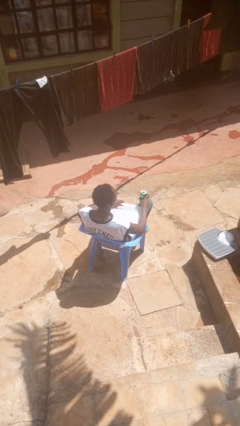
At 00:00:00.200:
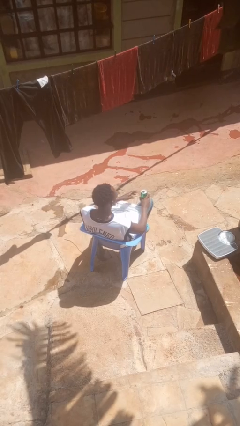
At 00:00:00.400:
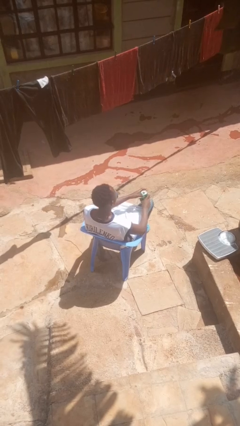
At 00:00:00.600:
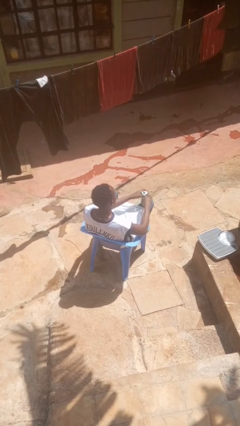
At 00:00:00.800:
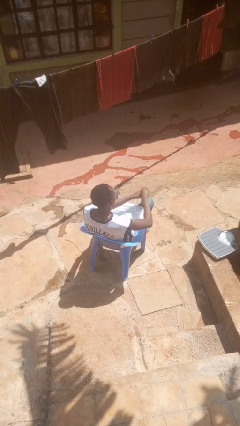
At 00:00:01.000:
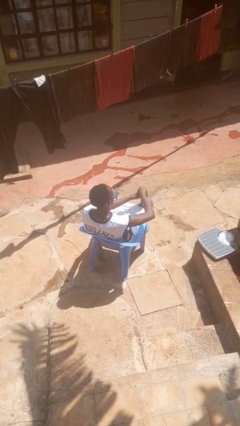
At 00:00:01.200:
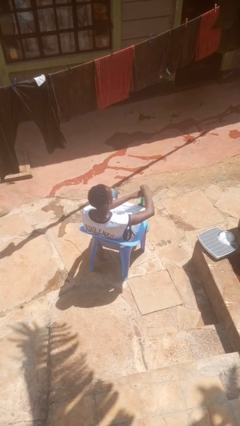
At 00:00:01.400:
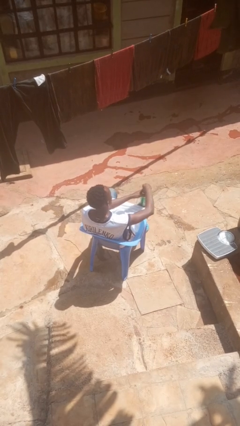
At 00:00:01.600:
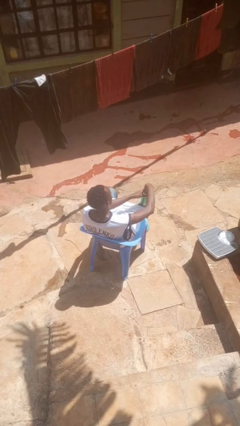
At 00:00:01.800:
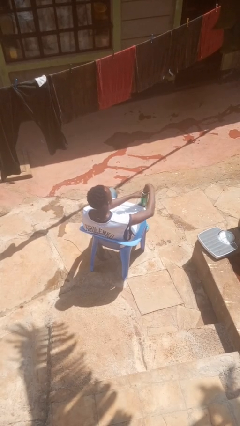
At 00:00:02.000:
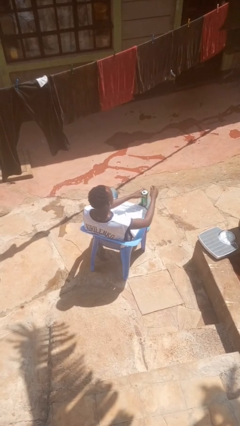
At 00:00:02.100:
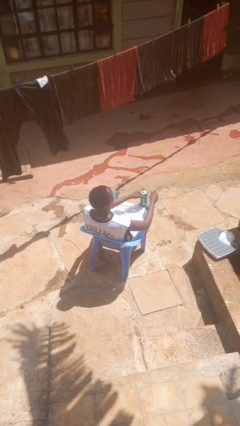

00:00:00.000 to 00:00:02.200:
person opens beverage can

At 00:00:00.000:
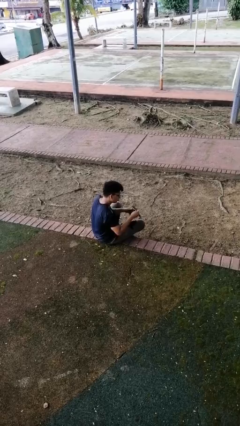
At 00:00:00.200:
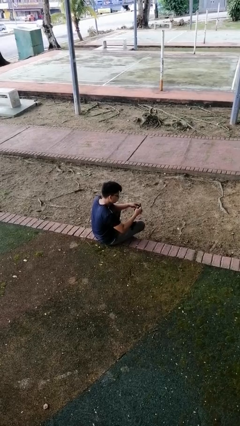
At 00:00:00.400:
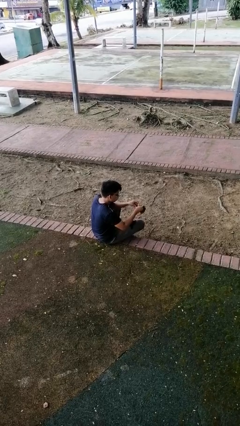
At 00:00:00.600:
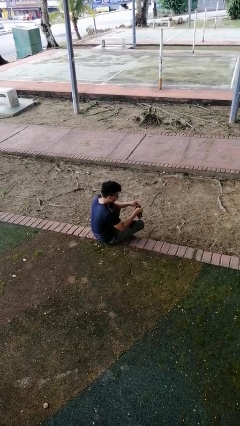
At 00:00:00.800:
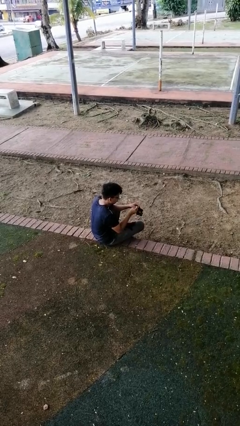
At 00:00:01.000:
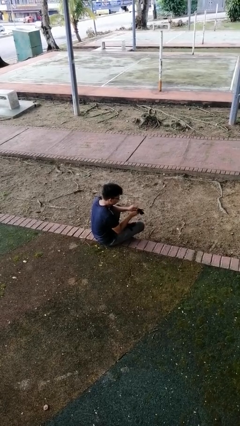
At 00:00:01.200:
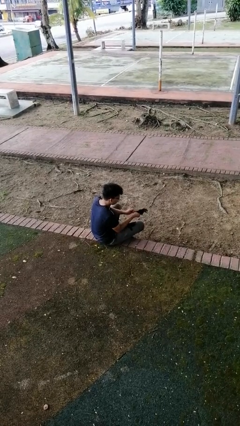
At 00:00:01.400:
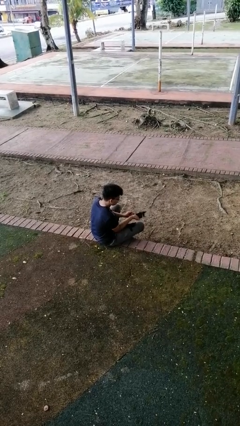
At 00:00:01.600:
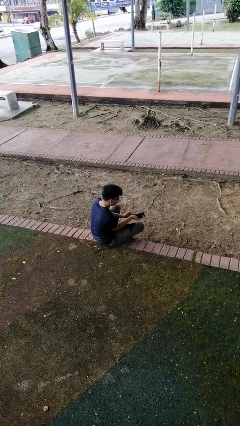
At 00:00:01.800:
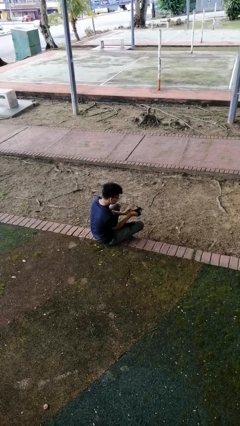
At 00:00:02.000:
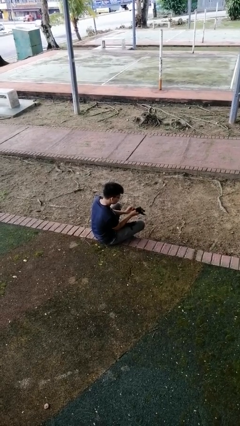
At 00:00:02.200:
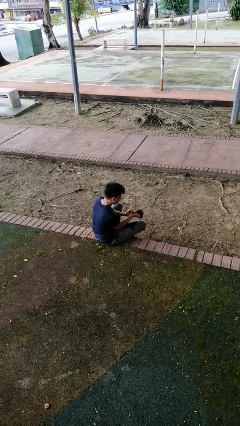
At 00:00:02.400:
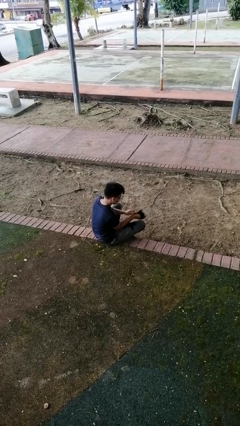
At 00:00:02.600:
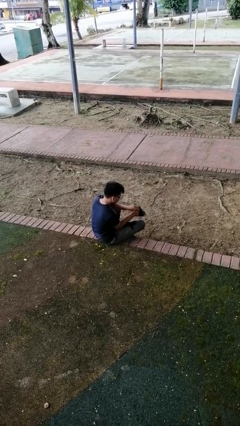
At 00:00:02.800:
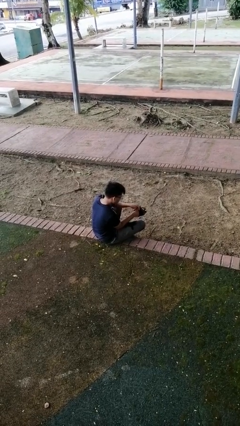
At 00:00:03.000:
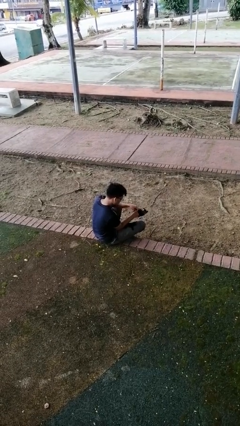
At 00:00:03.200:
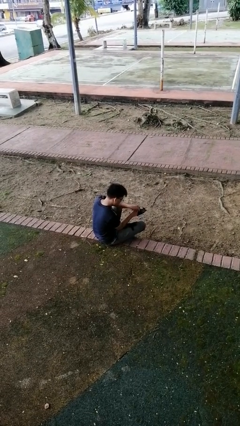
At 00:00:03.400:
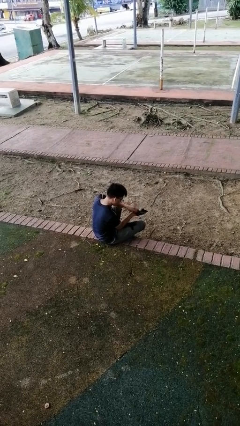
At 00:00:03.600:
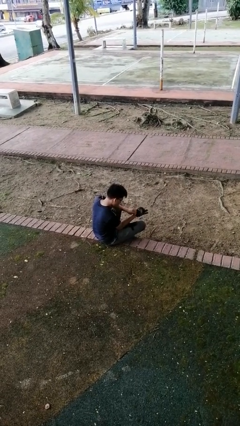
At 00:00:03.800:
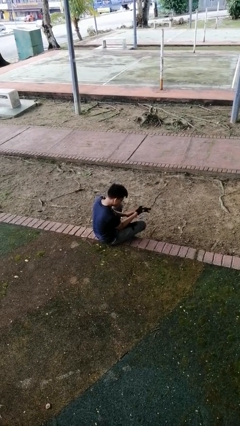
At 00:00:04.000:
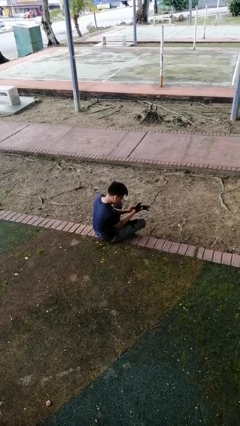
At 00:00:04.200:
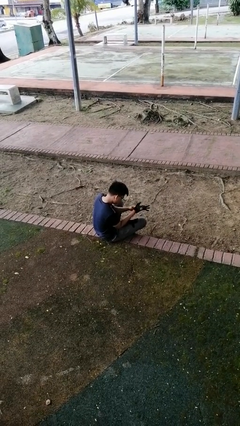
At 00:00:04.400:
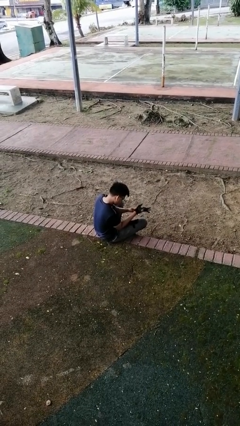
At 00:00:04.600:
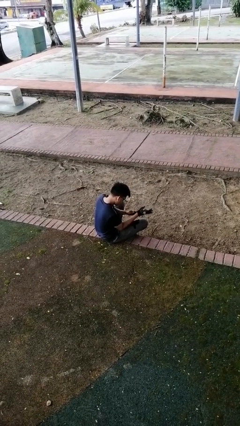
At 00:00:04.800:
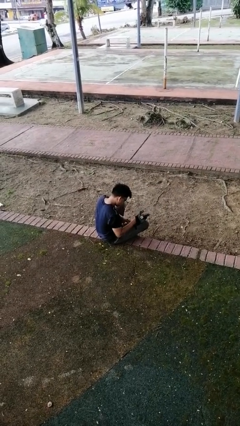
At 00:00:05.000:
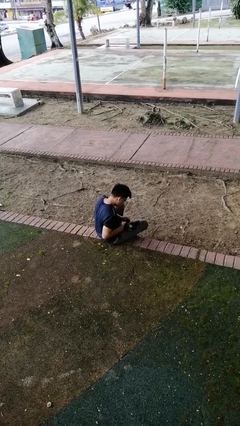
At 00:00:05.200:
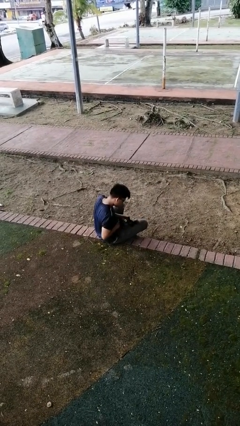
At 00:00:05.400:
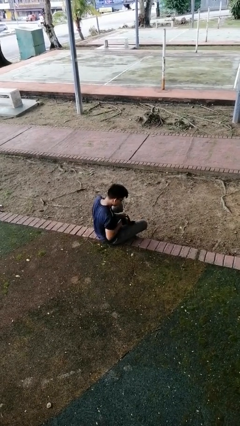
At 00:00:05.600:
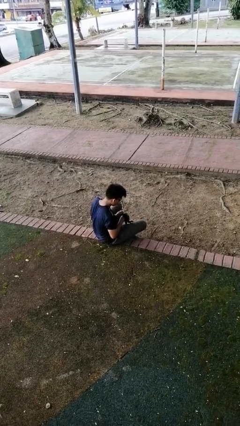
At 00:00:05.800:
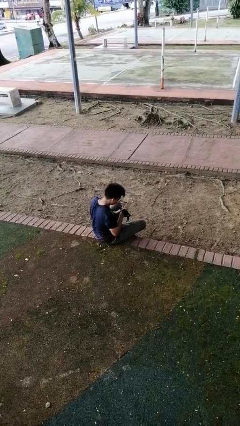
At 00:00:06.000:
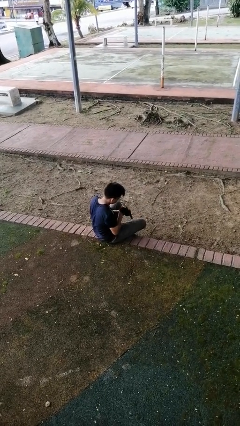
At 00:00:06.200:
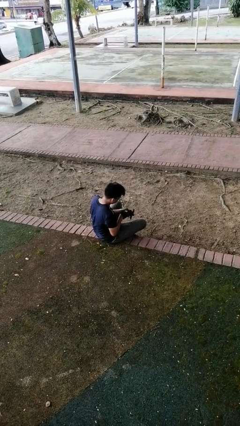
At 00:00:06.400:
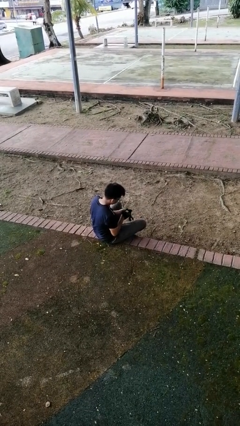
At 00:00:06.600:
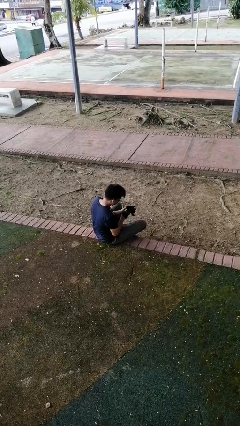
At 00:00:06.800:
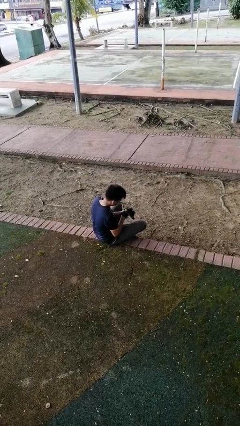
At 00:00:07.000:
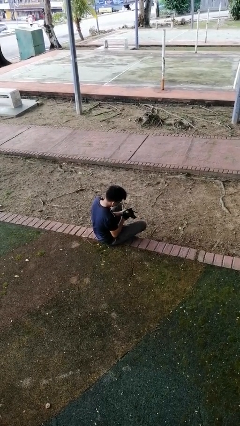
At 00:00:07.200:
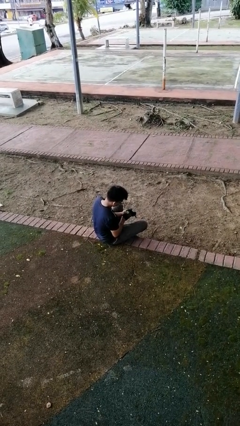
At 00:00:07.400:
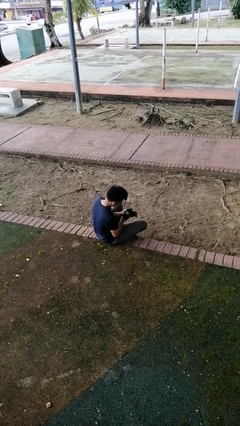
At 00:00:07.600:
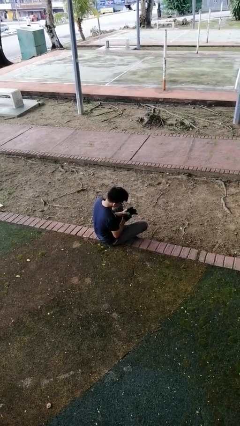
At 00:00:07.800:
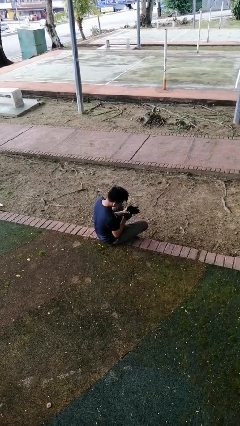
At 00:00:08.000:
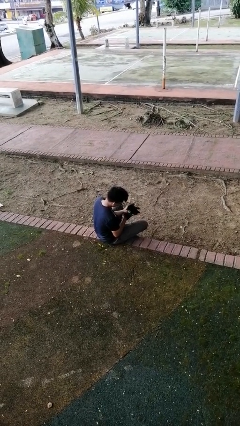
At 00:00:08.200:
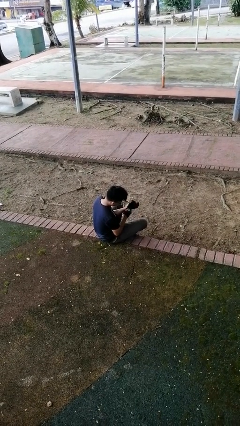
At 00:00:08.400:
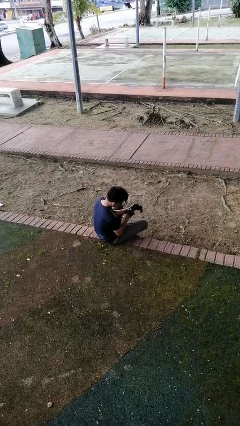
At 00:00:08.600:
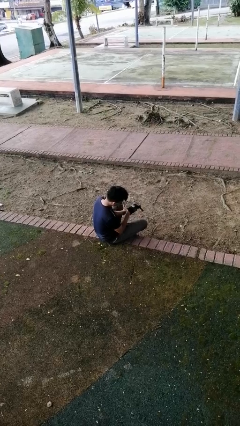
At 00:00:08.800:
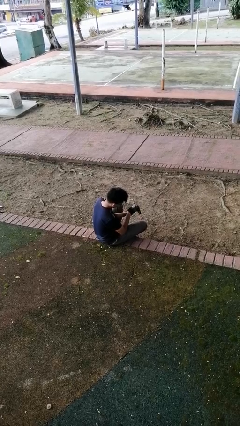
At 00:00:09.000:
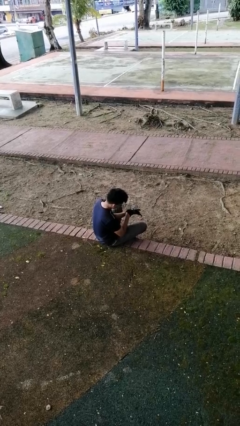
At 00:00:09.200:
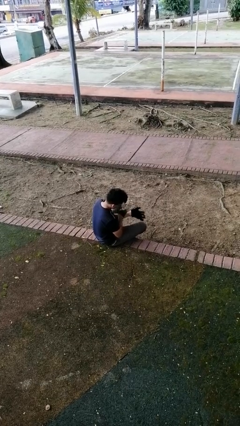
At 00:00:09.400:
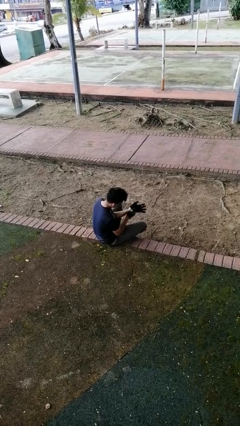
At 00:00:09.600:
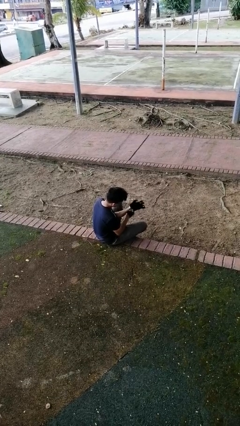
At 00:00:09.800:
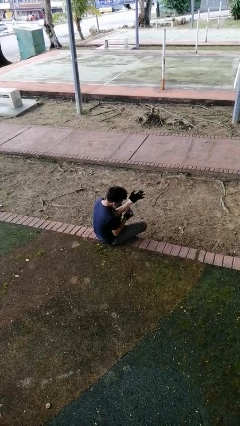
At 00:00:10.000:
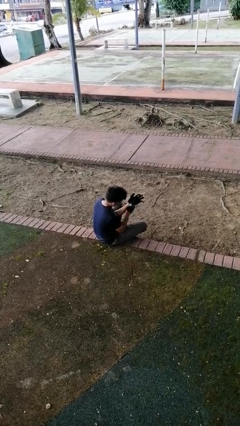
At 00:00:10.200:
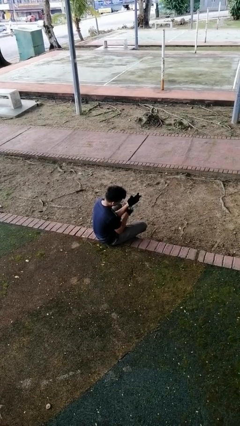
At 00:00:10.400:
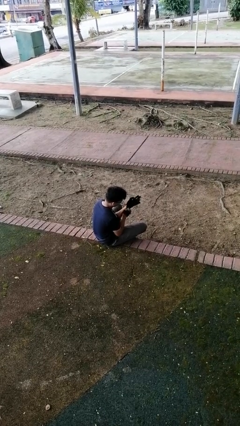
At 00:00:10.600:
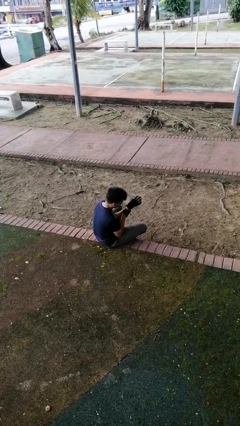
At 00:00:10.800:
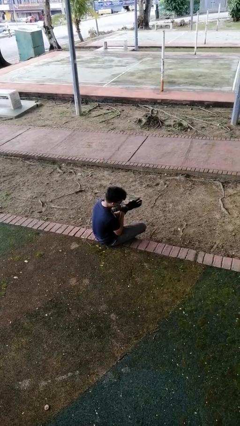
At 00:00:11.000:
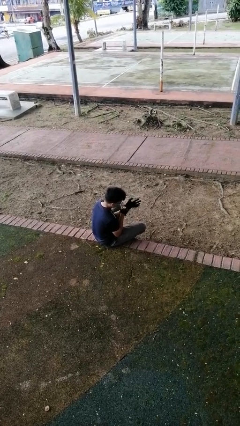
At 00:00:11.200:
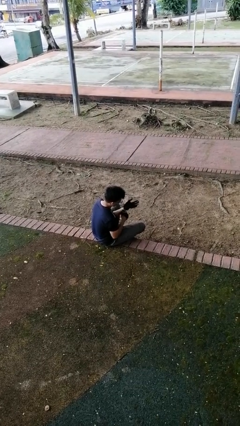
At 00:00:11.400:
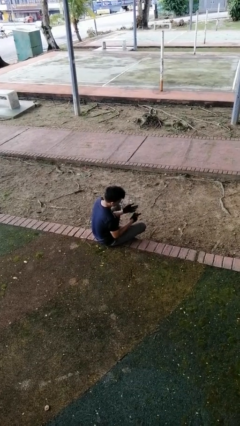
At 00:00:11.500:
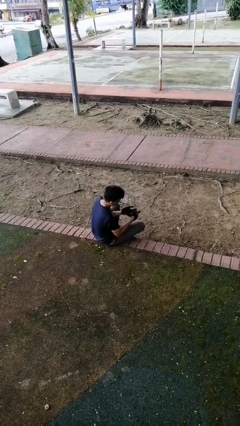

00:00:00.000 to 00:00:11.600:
person puts on gloves

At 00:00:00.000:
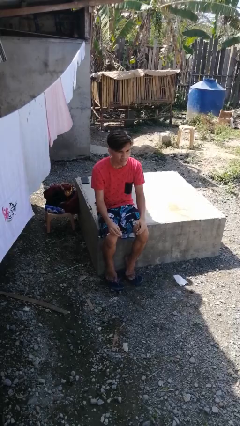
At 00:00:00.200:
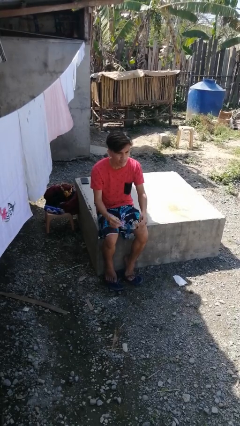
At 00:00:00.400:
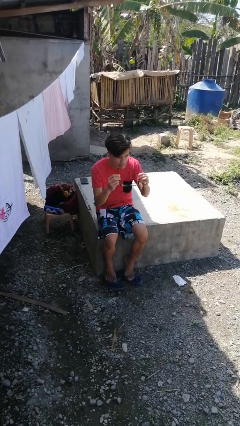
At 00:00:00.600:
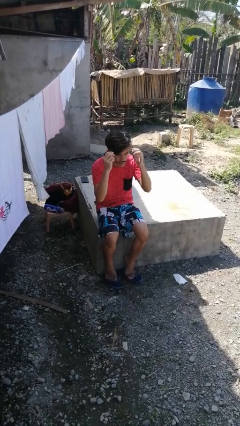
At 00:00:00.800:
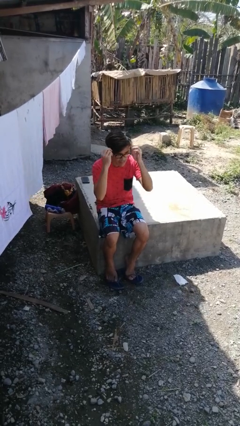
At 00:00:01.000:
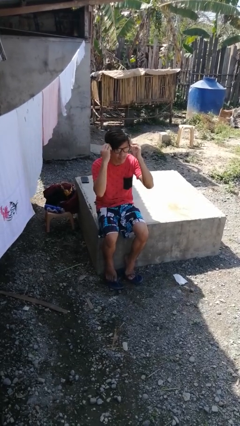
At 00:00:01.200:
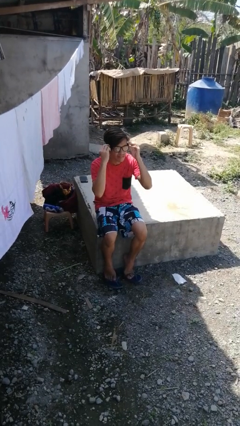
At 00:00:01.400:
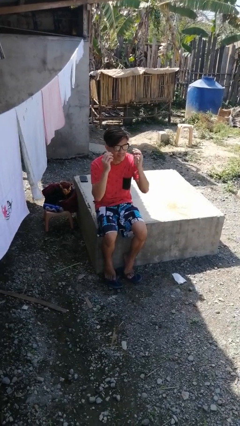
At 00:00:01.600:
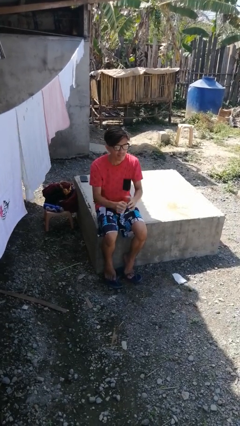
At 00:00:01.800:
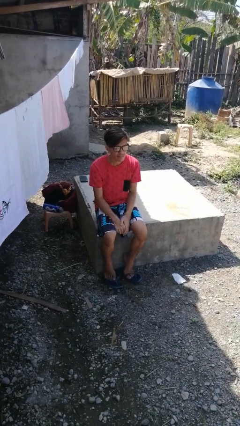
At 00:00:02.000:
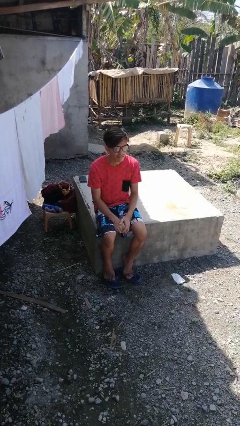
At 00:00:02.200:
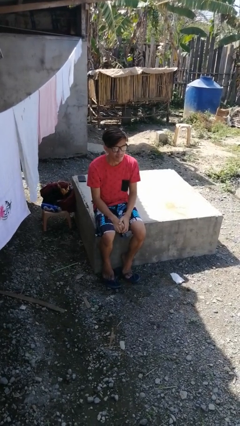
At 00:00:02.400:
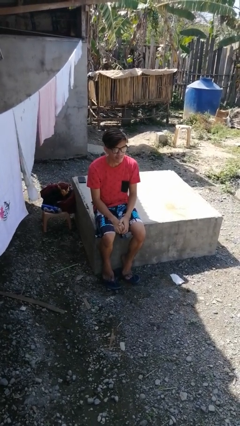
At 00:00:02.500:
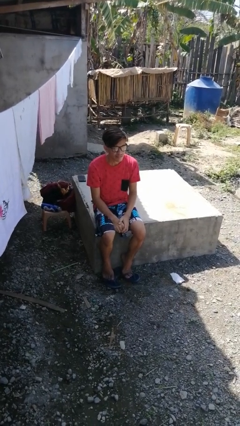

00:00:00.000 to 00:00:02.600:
person puts on glasses

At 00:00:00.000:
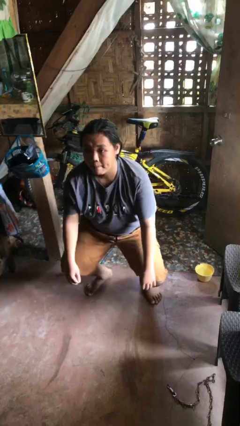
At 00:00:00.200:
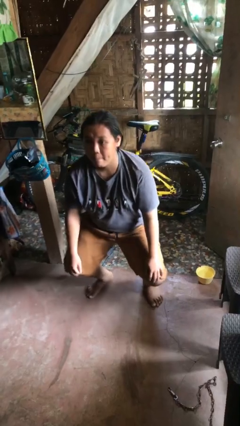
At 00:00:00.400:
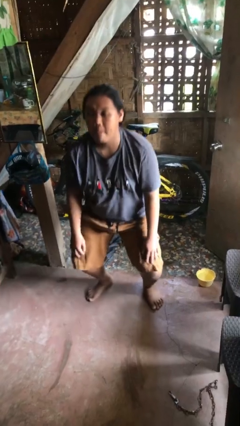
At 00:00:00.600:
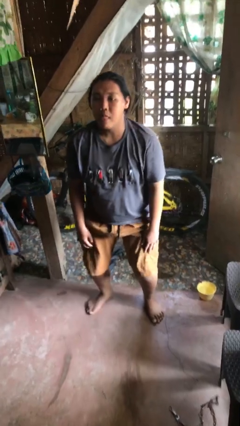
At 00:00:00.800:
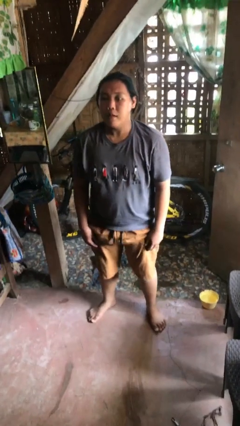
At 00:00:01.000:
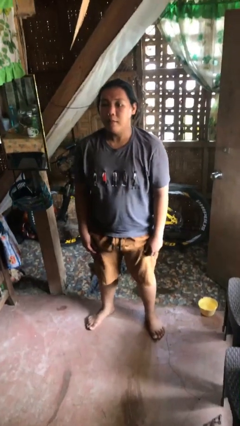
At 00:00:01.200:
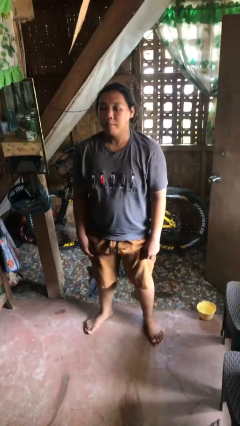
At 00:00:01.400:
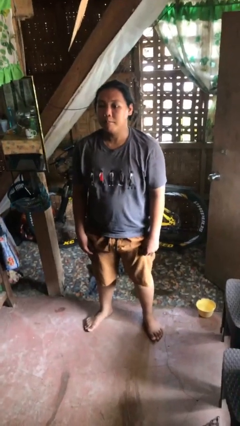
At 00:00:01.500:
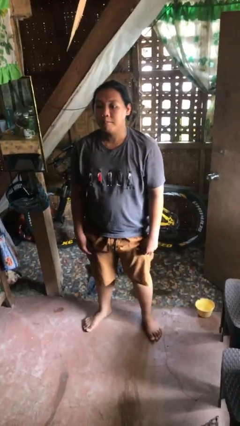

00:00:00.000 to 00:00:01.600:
person stands up
